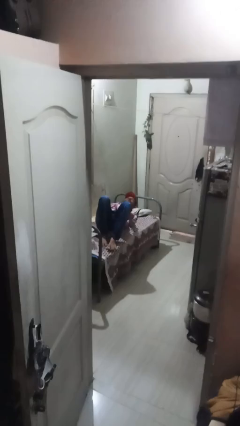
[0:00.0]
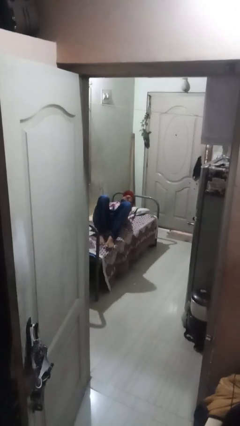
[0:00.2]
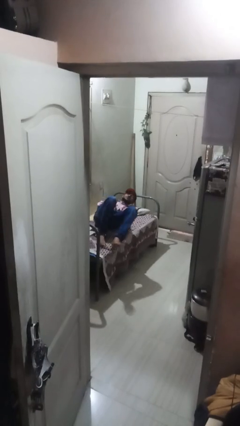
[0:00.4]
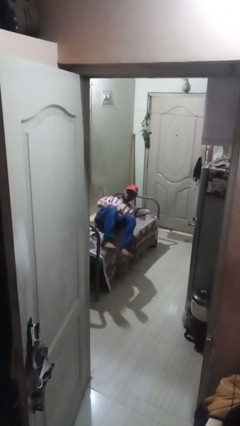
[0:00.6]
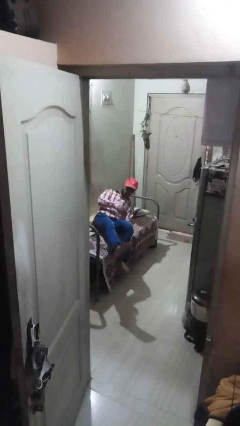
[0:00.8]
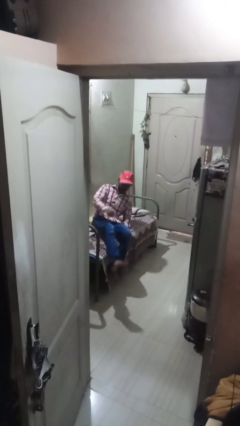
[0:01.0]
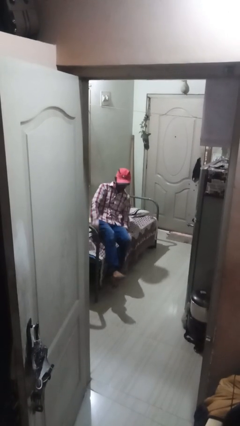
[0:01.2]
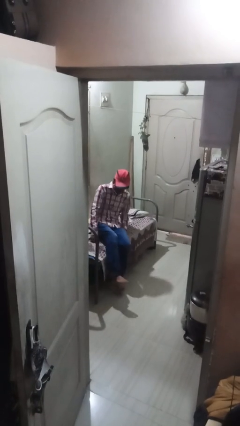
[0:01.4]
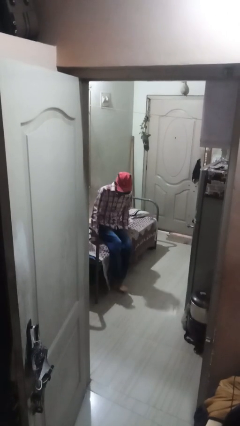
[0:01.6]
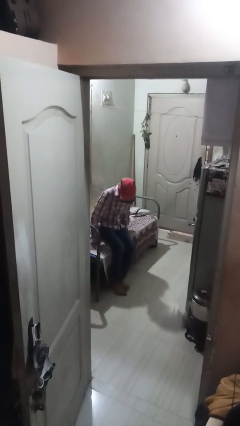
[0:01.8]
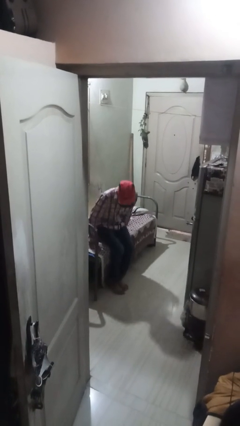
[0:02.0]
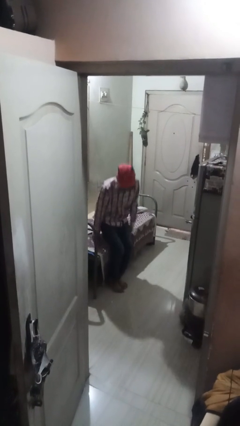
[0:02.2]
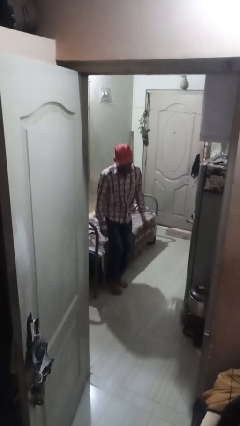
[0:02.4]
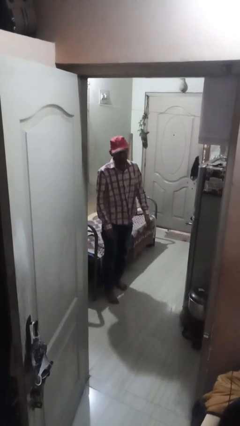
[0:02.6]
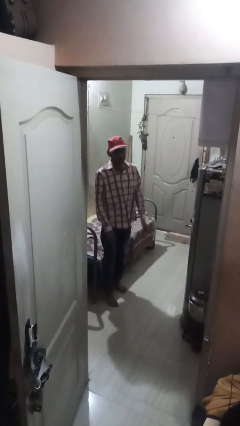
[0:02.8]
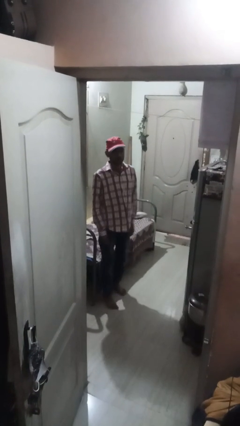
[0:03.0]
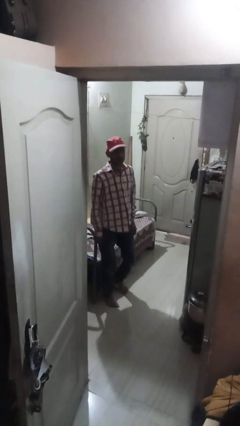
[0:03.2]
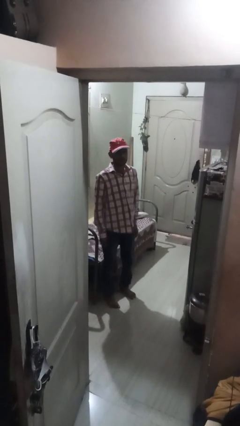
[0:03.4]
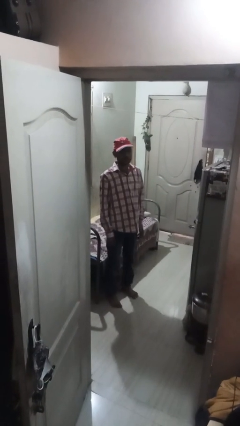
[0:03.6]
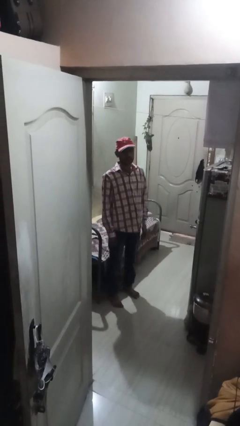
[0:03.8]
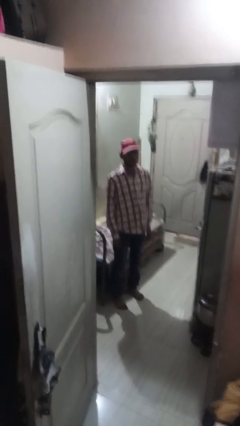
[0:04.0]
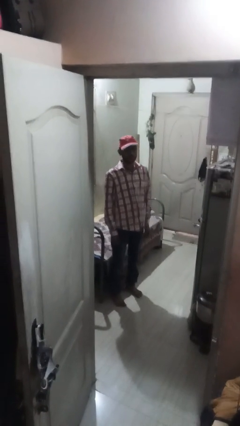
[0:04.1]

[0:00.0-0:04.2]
person stands up

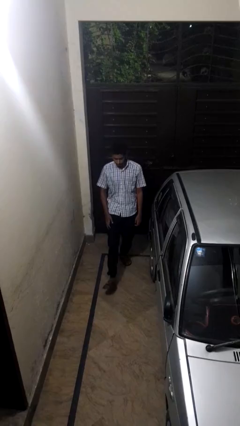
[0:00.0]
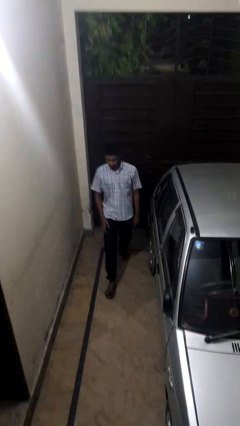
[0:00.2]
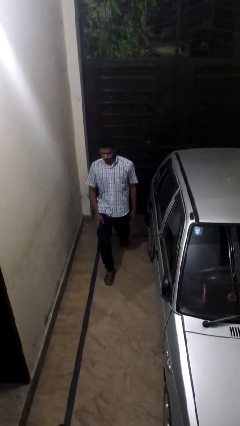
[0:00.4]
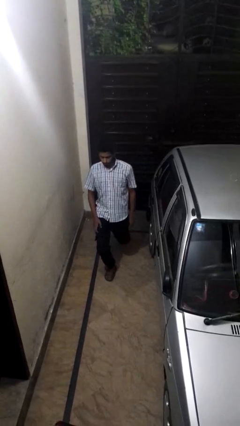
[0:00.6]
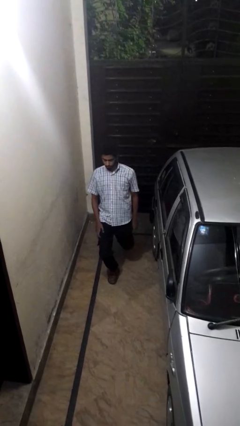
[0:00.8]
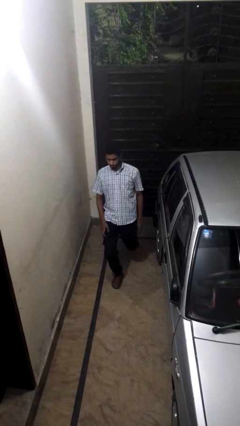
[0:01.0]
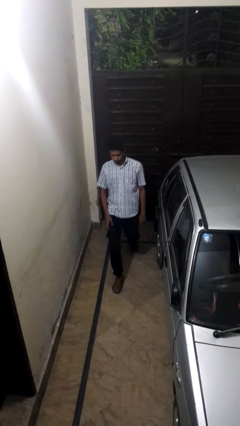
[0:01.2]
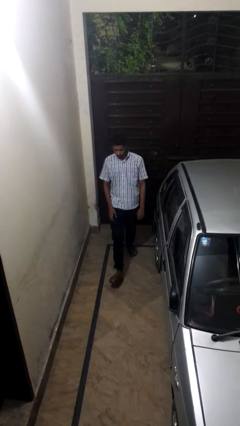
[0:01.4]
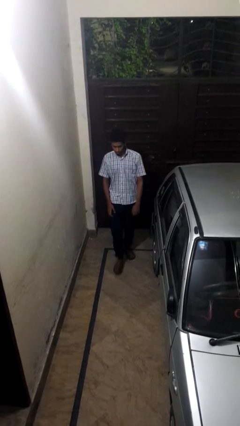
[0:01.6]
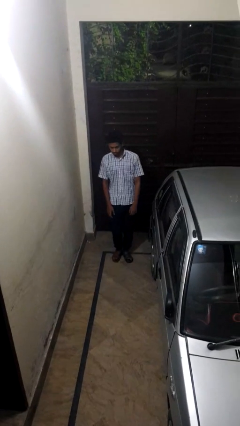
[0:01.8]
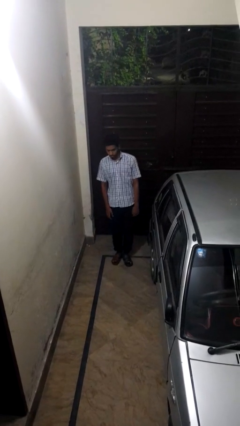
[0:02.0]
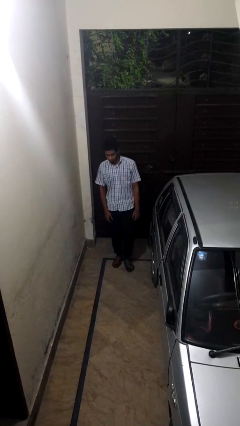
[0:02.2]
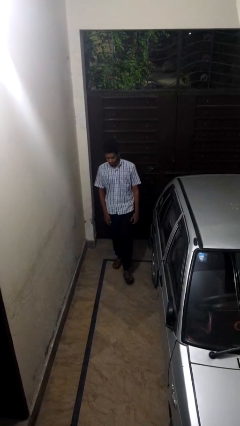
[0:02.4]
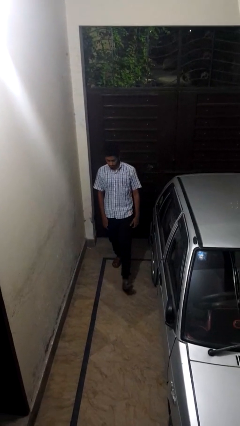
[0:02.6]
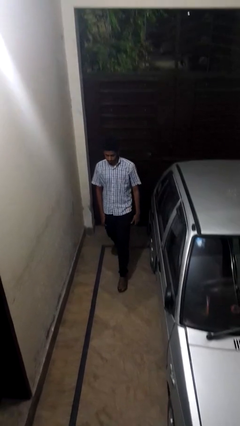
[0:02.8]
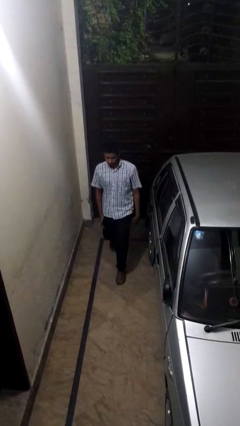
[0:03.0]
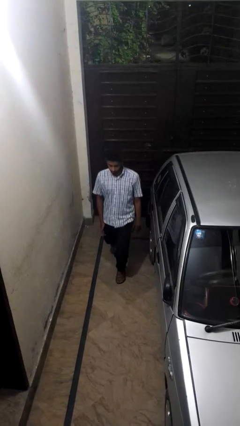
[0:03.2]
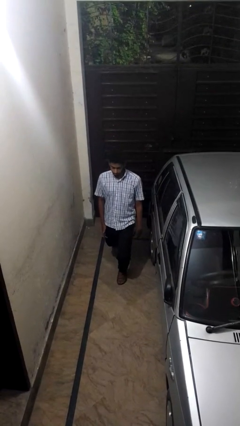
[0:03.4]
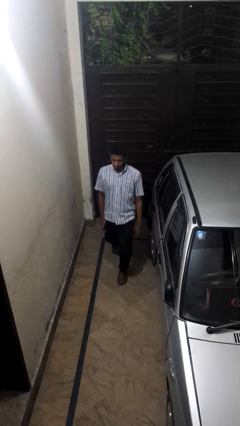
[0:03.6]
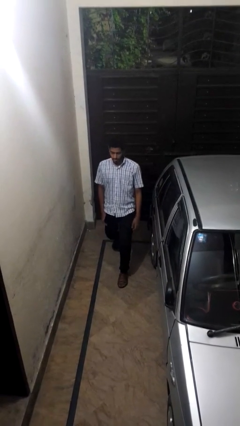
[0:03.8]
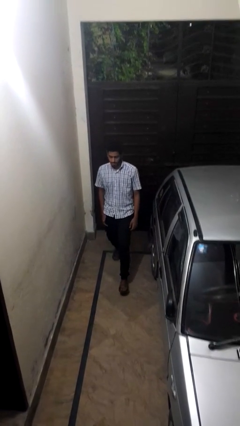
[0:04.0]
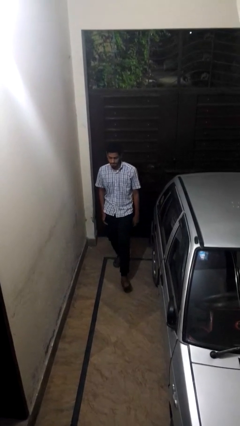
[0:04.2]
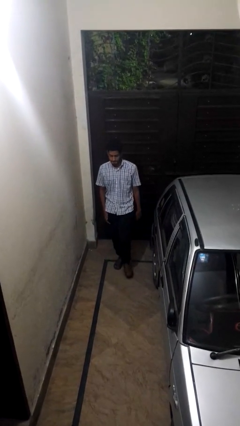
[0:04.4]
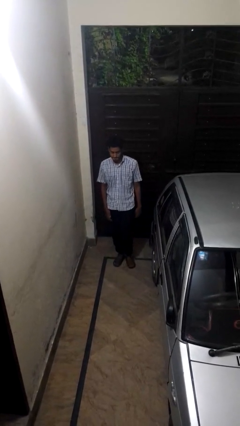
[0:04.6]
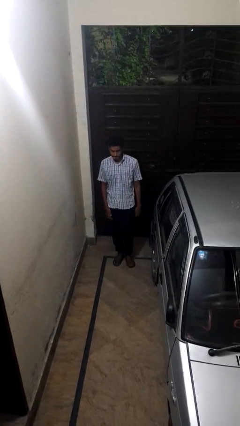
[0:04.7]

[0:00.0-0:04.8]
person exercises with lunges

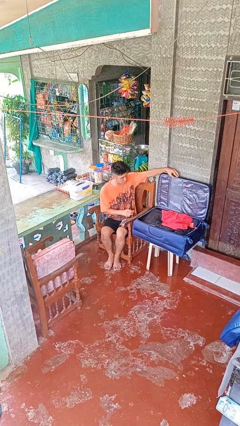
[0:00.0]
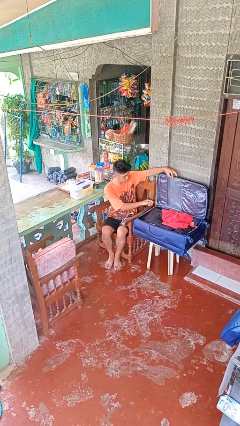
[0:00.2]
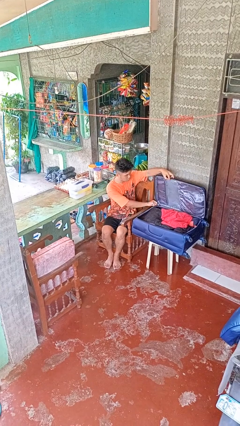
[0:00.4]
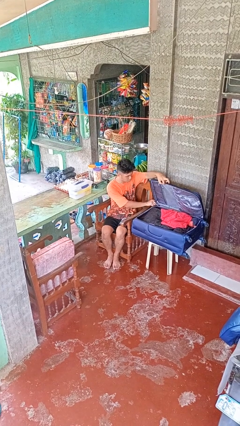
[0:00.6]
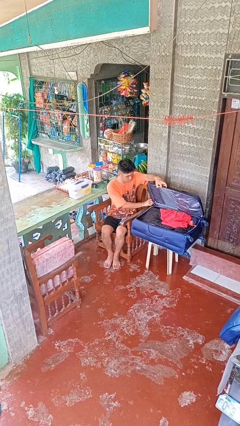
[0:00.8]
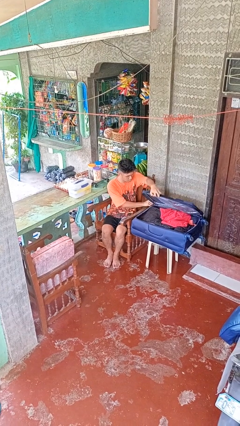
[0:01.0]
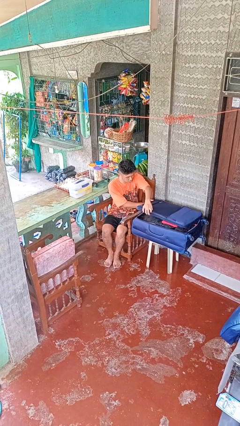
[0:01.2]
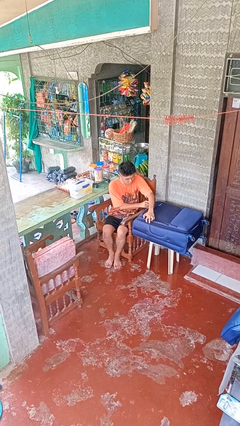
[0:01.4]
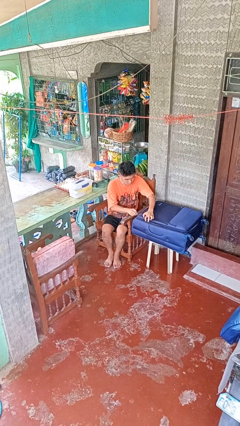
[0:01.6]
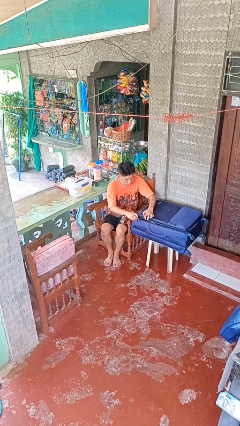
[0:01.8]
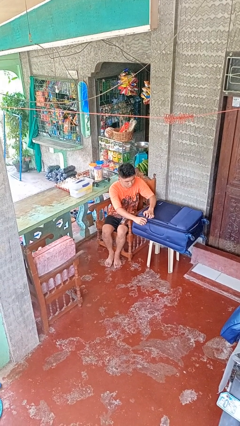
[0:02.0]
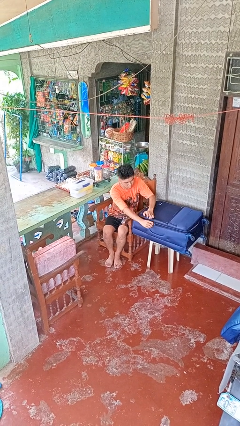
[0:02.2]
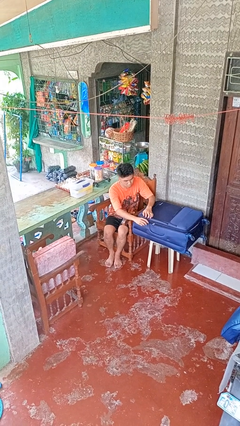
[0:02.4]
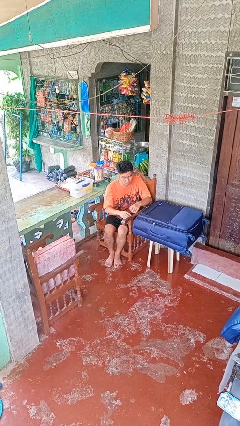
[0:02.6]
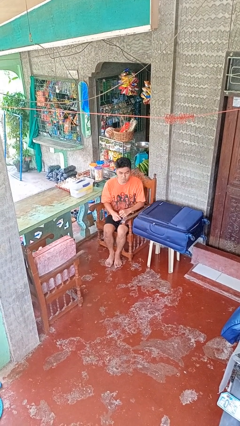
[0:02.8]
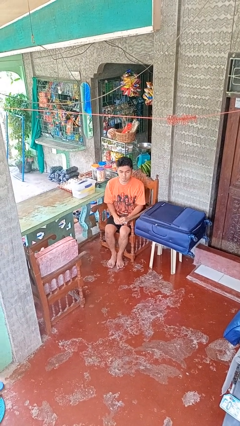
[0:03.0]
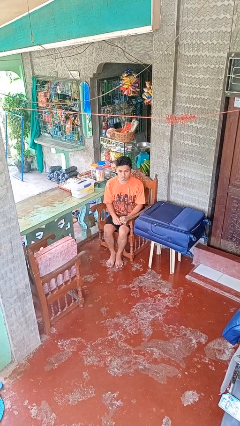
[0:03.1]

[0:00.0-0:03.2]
person closes suitcase

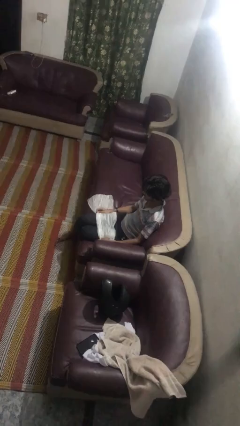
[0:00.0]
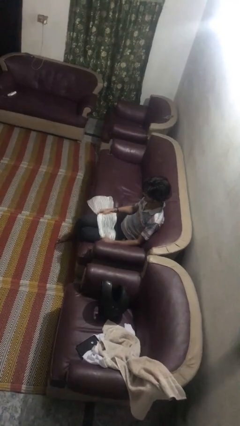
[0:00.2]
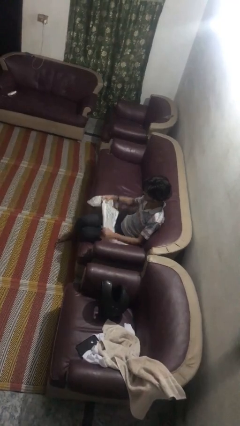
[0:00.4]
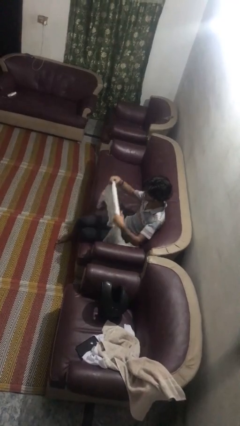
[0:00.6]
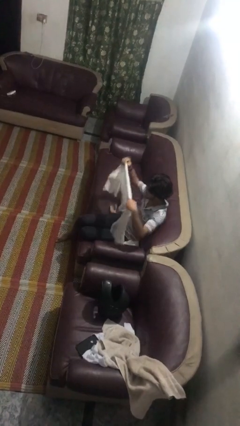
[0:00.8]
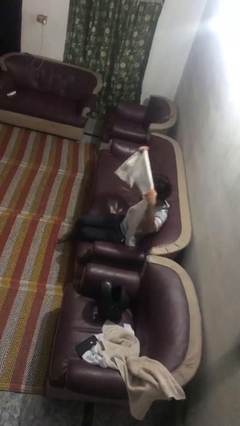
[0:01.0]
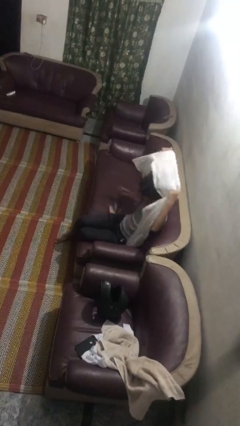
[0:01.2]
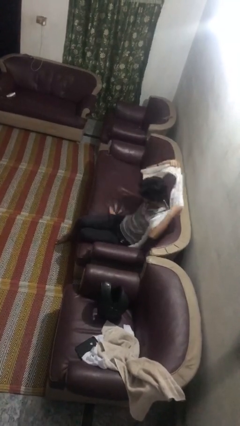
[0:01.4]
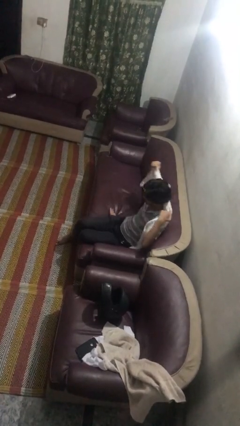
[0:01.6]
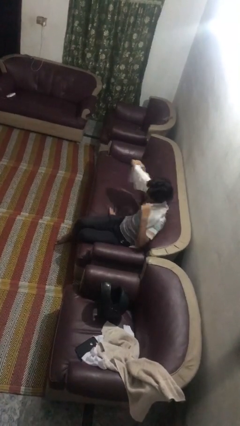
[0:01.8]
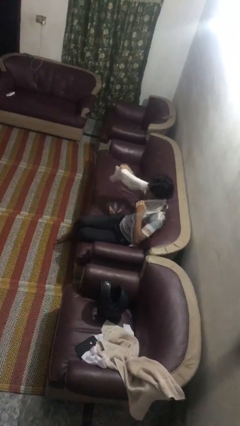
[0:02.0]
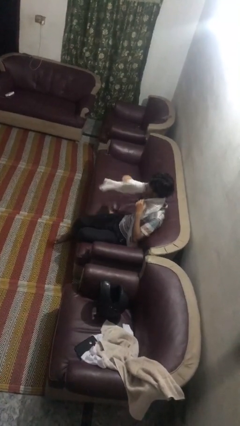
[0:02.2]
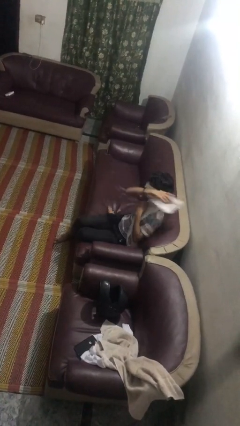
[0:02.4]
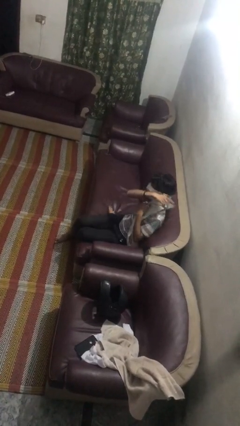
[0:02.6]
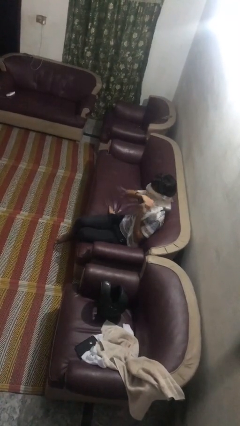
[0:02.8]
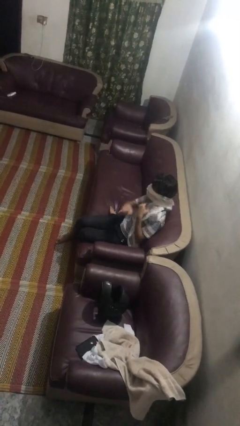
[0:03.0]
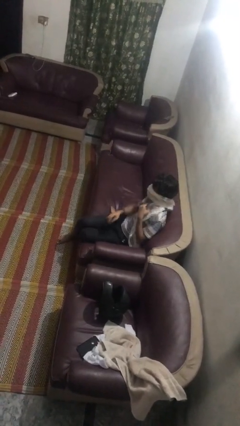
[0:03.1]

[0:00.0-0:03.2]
person puts on scarf

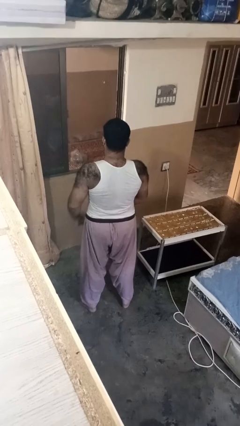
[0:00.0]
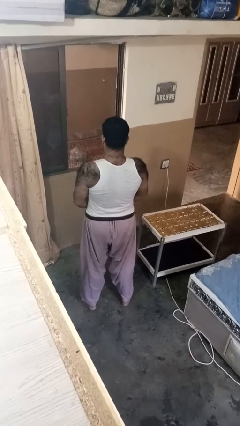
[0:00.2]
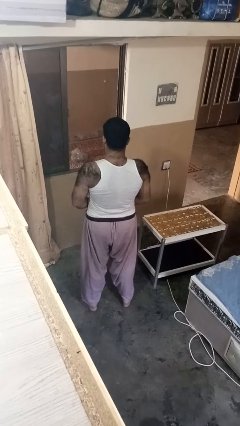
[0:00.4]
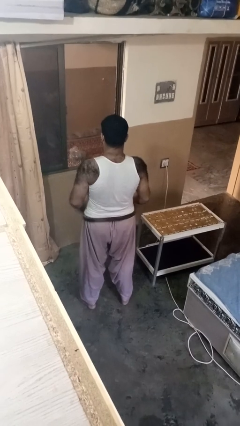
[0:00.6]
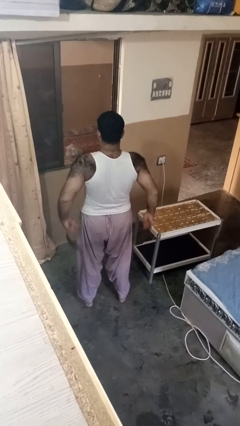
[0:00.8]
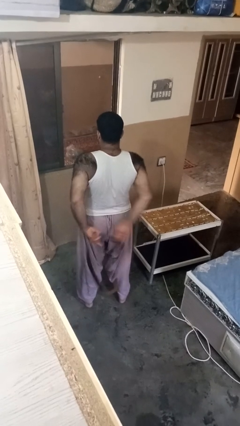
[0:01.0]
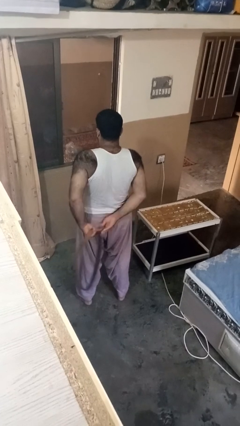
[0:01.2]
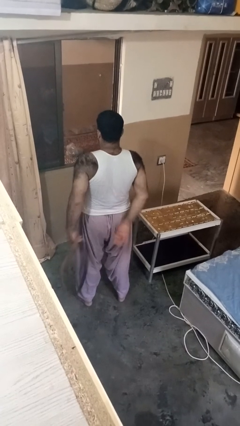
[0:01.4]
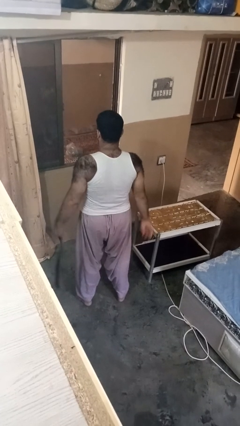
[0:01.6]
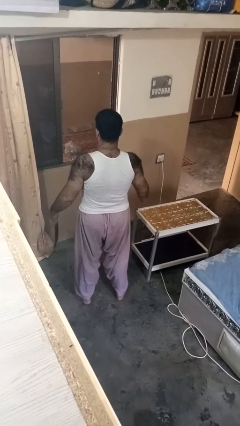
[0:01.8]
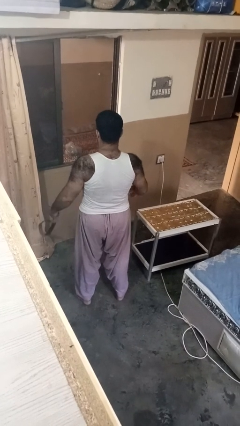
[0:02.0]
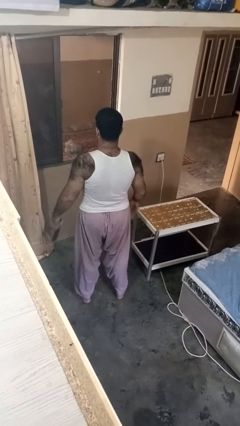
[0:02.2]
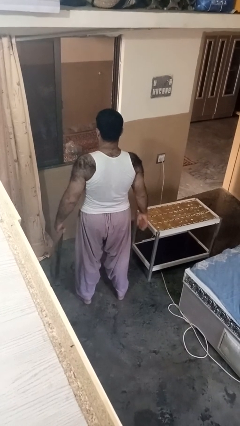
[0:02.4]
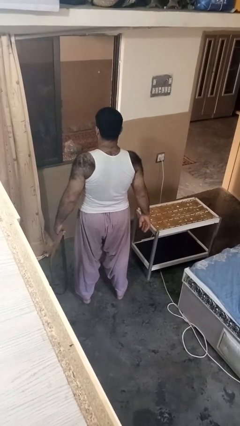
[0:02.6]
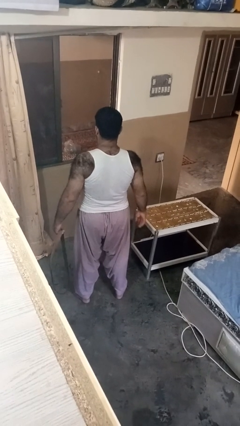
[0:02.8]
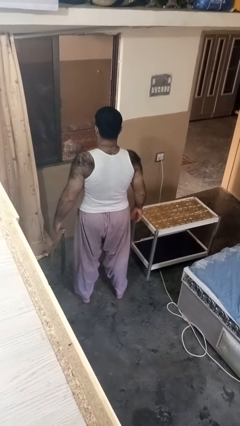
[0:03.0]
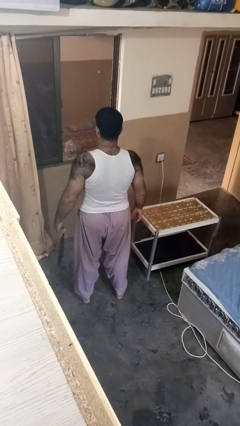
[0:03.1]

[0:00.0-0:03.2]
person takes off belt
